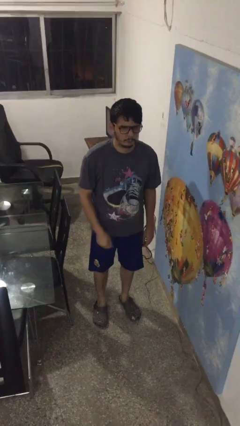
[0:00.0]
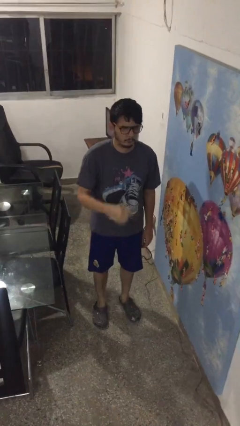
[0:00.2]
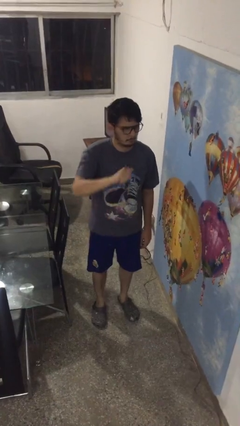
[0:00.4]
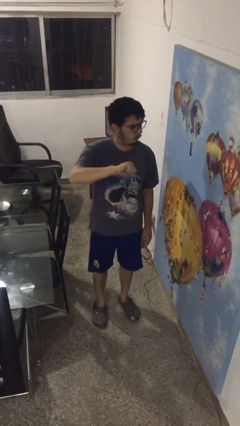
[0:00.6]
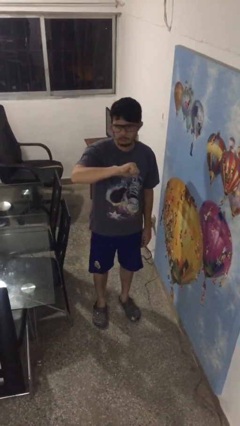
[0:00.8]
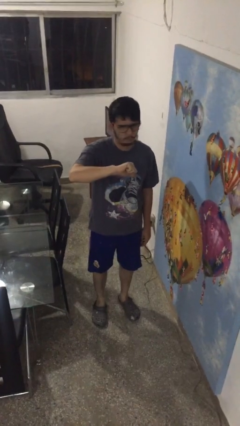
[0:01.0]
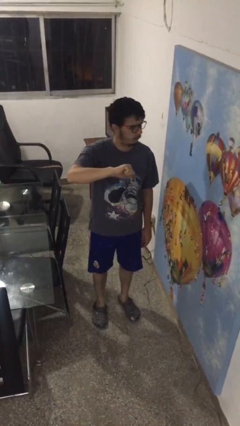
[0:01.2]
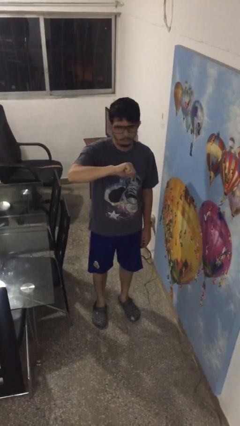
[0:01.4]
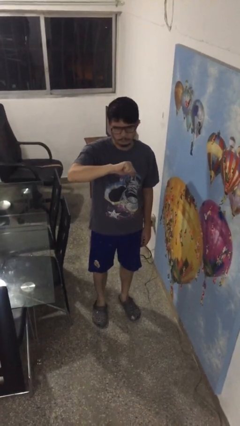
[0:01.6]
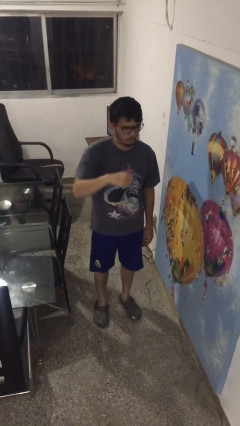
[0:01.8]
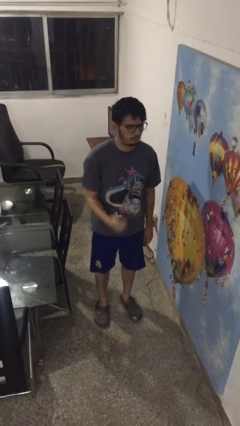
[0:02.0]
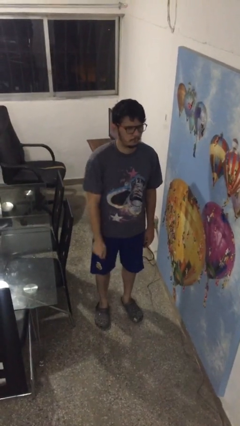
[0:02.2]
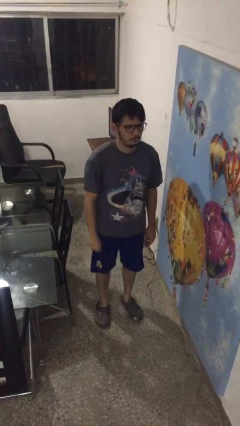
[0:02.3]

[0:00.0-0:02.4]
person gestures thumbs down

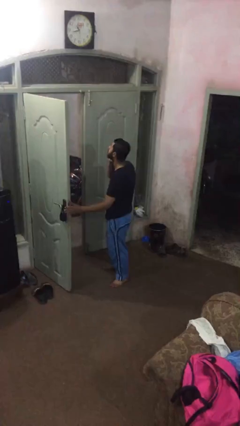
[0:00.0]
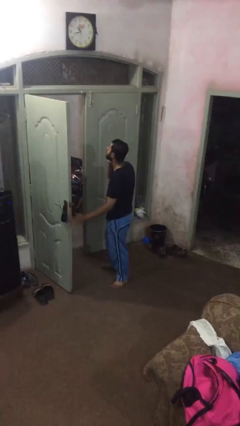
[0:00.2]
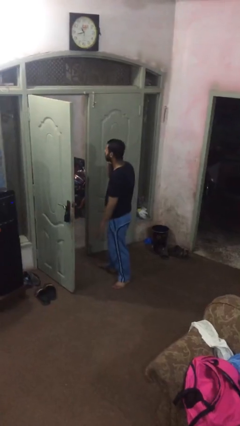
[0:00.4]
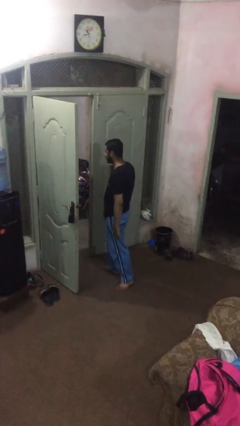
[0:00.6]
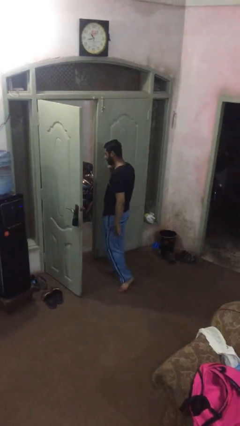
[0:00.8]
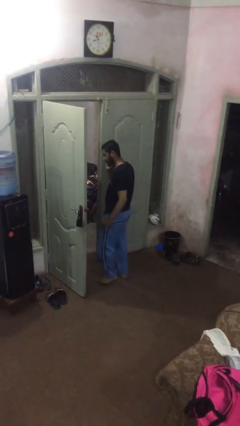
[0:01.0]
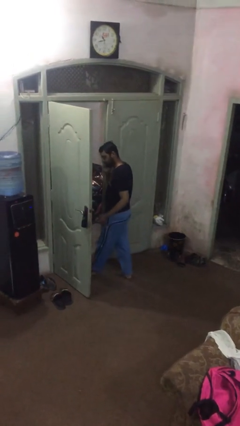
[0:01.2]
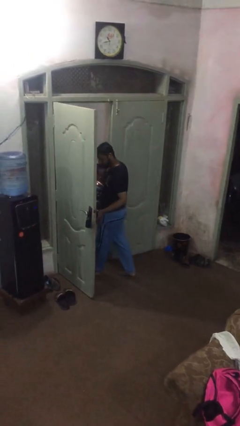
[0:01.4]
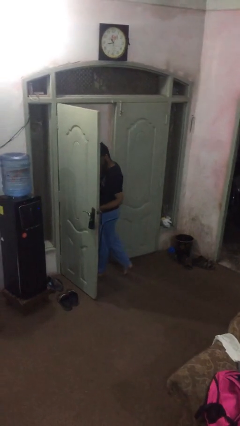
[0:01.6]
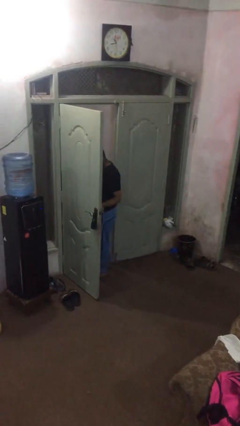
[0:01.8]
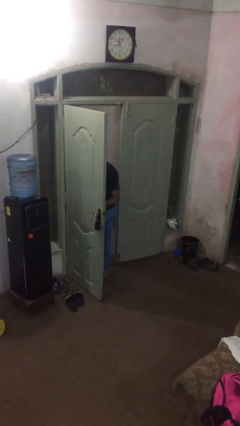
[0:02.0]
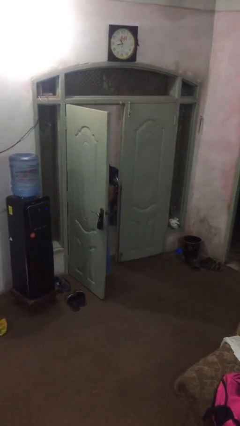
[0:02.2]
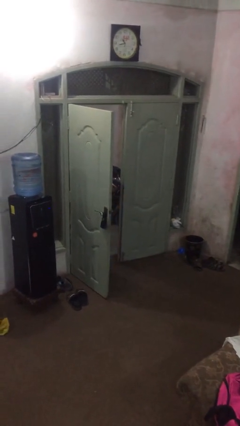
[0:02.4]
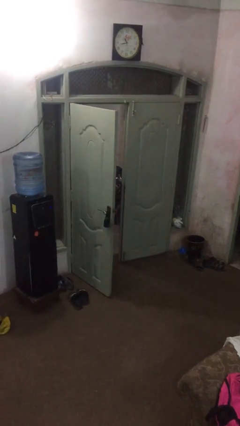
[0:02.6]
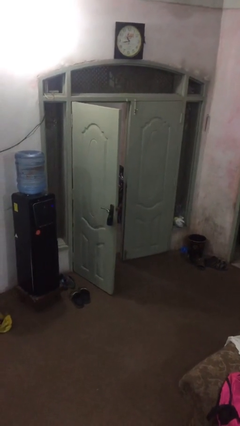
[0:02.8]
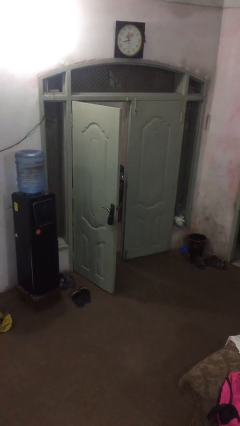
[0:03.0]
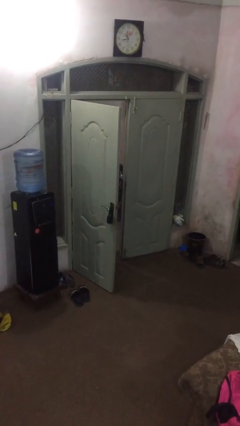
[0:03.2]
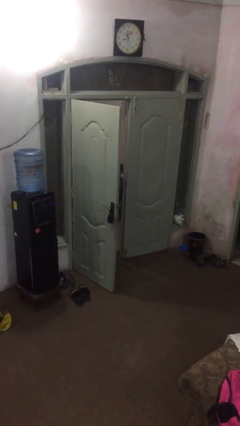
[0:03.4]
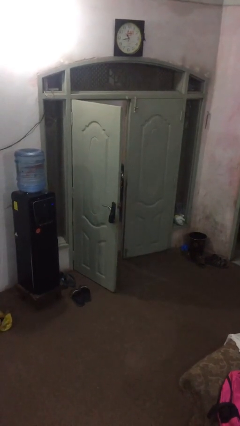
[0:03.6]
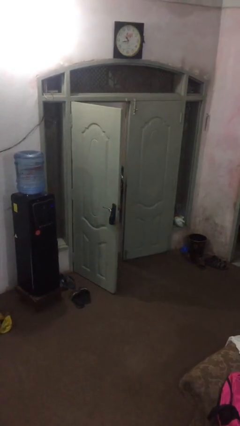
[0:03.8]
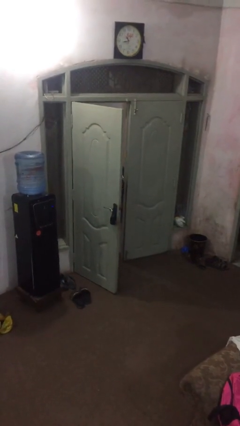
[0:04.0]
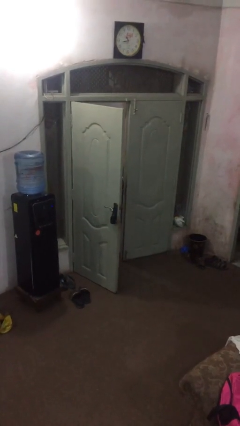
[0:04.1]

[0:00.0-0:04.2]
person exits scene through structure

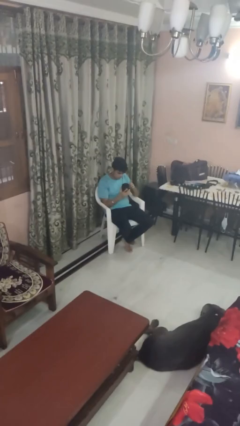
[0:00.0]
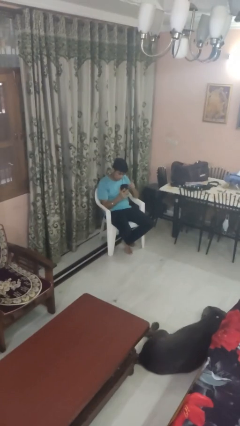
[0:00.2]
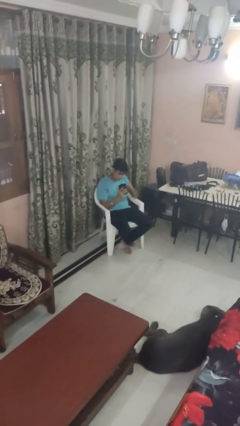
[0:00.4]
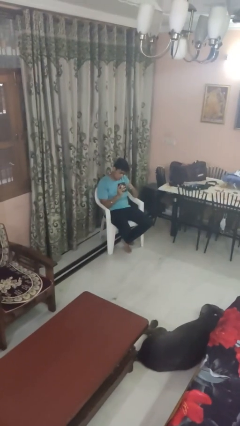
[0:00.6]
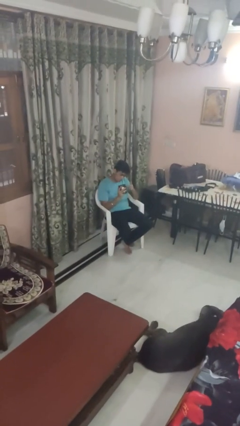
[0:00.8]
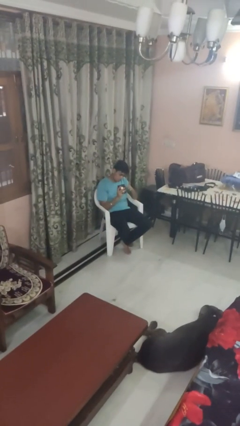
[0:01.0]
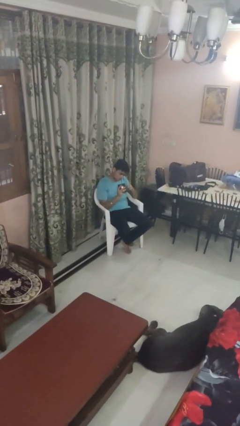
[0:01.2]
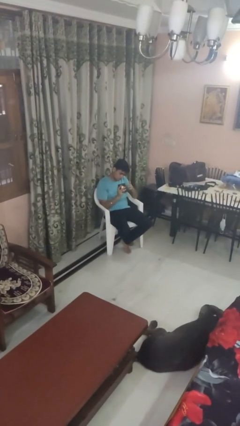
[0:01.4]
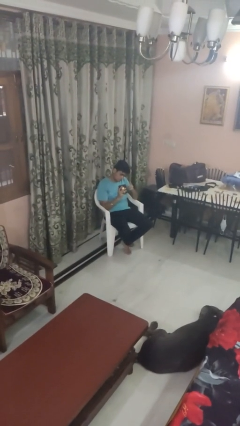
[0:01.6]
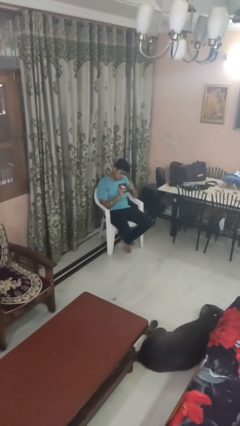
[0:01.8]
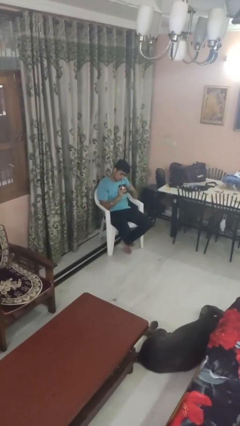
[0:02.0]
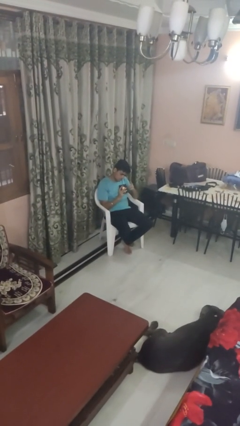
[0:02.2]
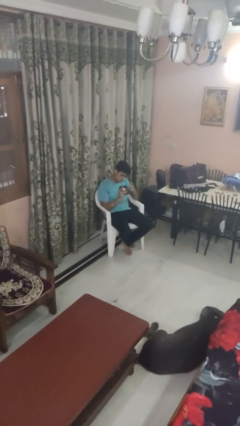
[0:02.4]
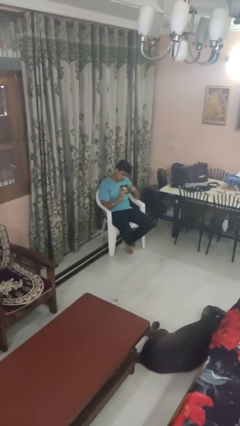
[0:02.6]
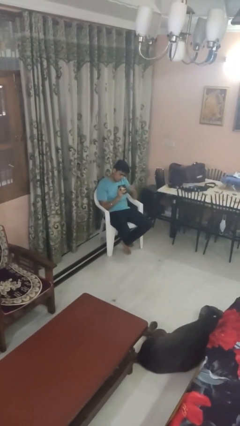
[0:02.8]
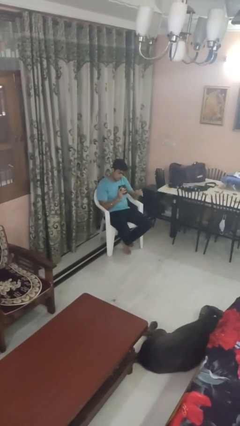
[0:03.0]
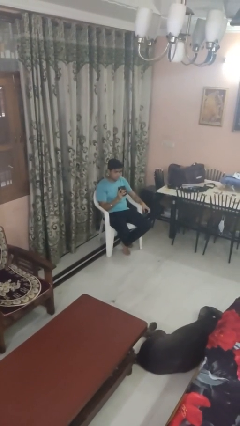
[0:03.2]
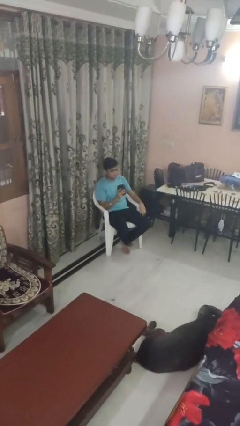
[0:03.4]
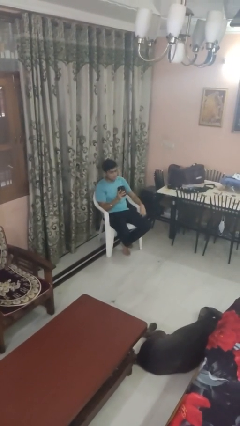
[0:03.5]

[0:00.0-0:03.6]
person taps object with finger

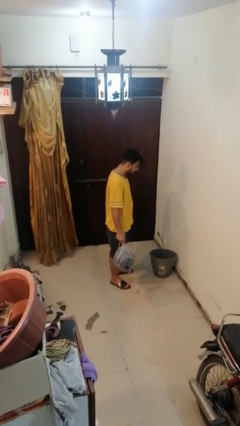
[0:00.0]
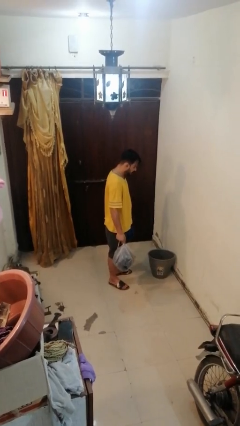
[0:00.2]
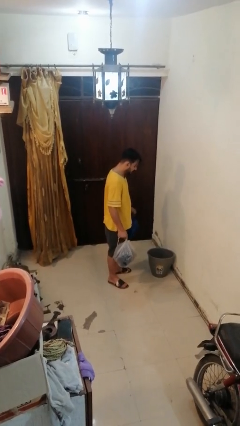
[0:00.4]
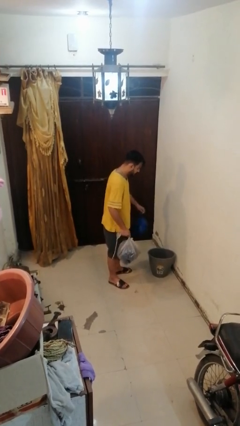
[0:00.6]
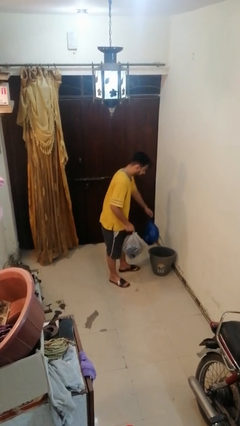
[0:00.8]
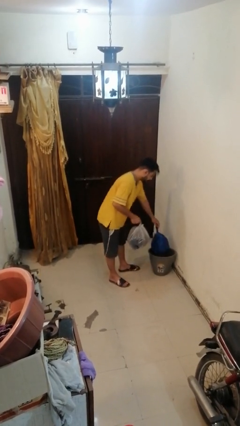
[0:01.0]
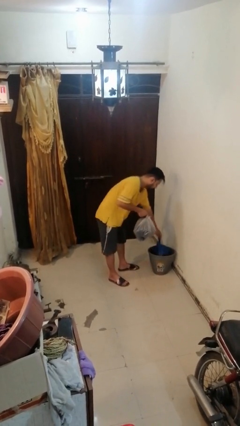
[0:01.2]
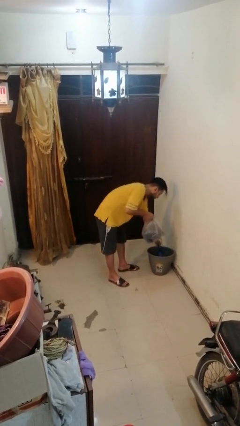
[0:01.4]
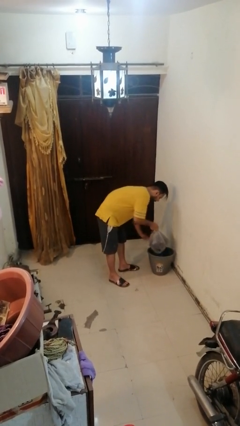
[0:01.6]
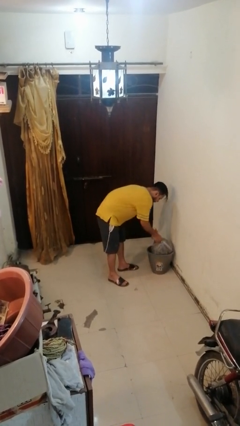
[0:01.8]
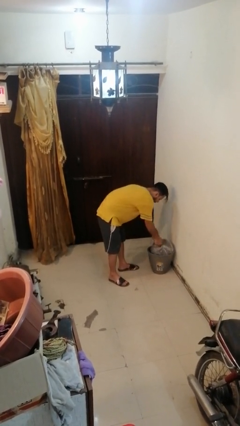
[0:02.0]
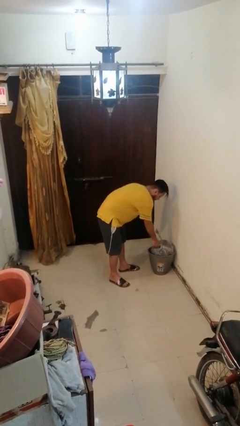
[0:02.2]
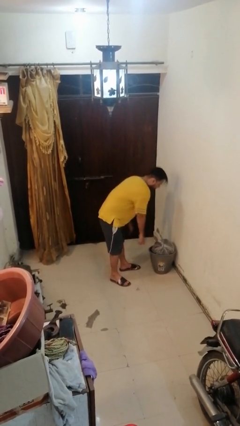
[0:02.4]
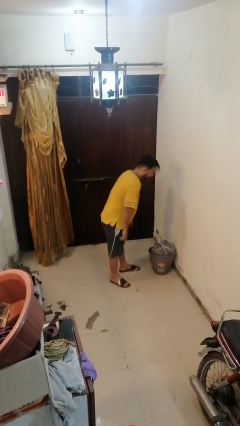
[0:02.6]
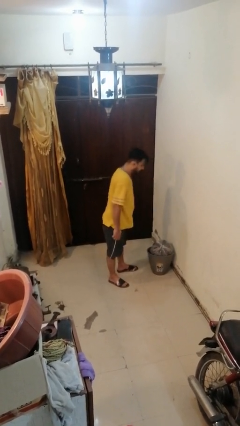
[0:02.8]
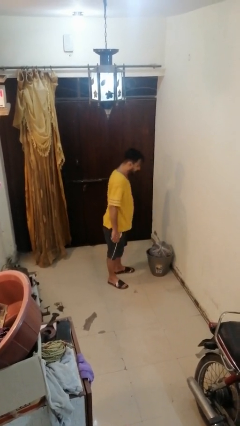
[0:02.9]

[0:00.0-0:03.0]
person discards trash

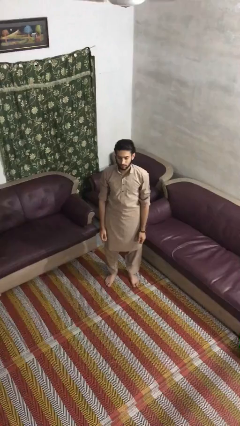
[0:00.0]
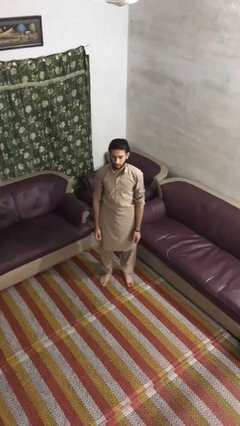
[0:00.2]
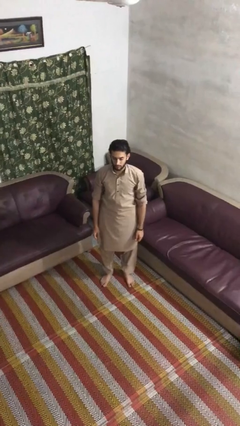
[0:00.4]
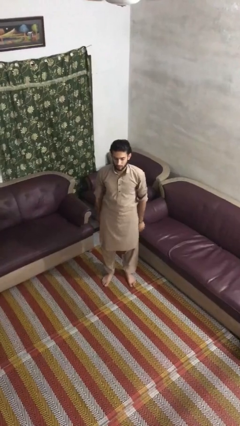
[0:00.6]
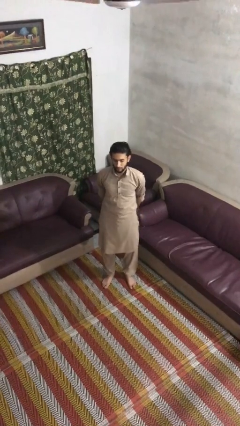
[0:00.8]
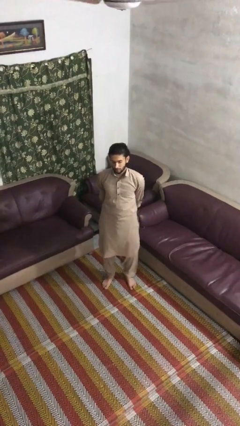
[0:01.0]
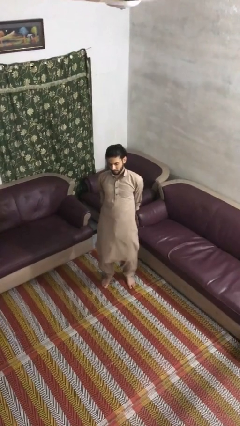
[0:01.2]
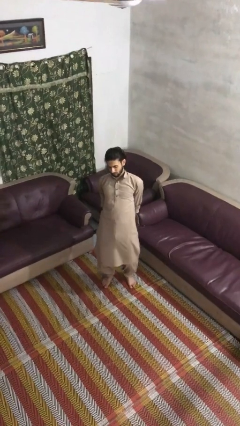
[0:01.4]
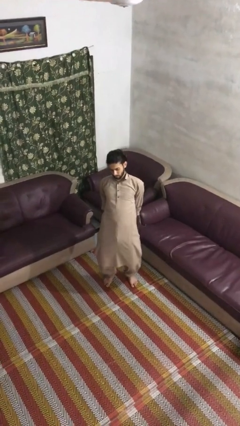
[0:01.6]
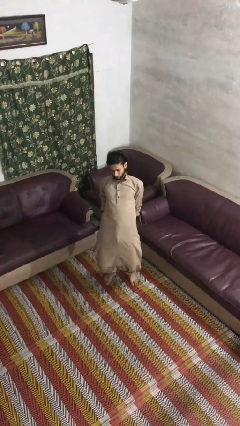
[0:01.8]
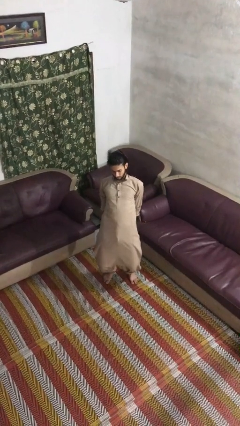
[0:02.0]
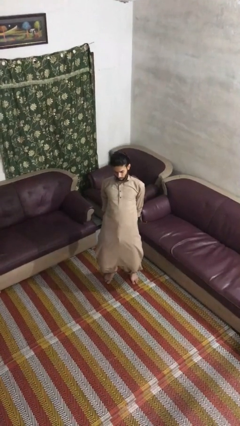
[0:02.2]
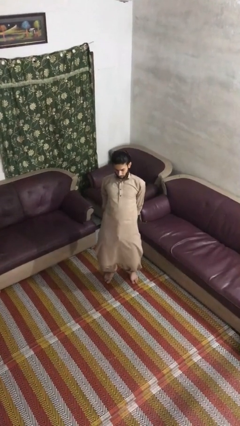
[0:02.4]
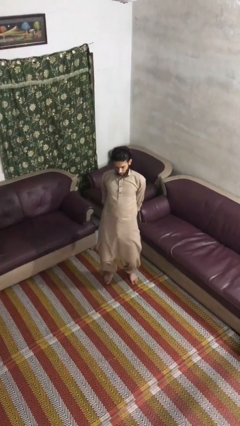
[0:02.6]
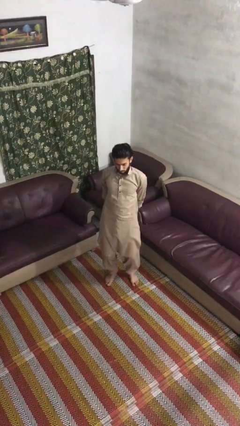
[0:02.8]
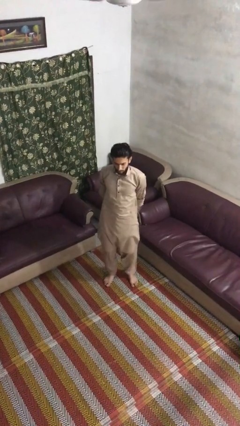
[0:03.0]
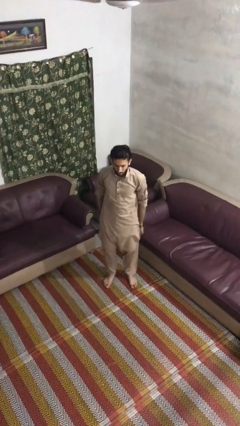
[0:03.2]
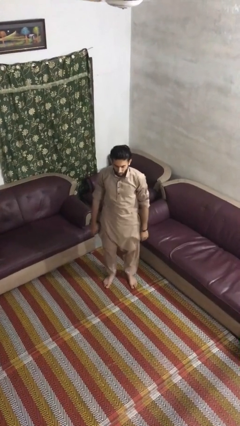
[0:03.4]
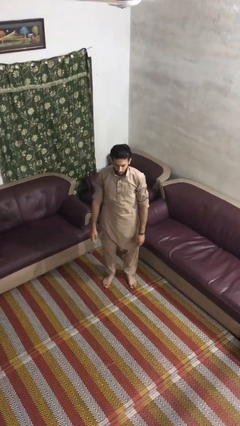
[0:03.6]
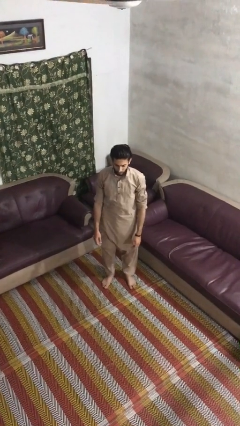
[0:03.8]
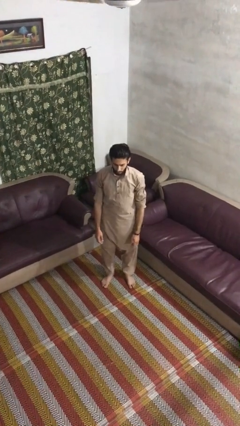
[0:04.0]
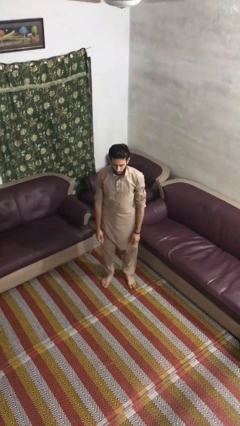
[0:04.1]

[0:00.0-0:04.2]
person stretches back

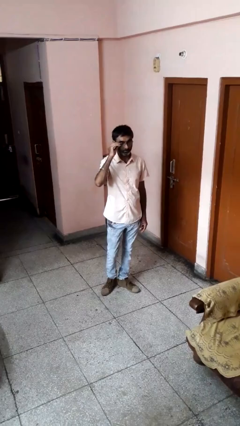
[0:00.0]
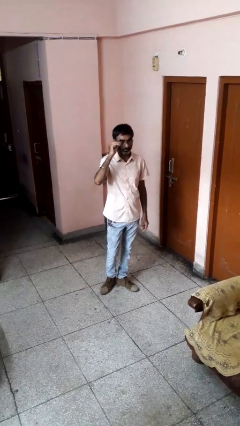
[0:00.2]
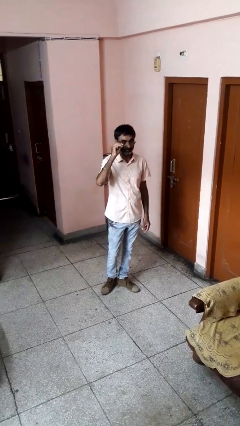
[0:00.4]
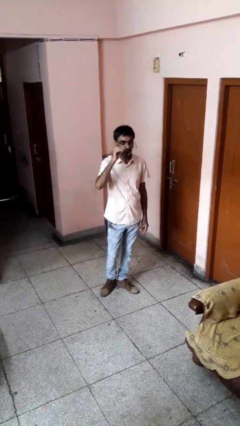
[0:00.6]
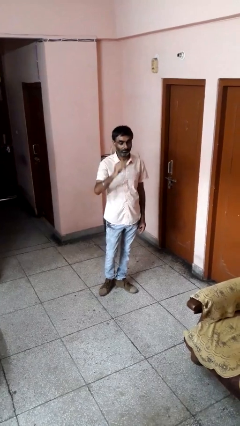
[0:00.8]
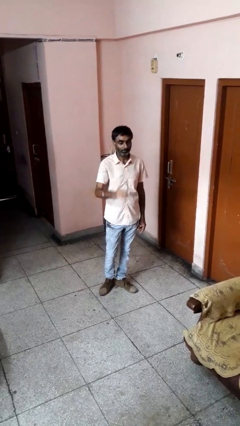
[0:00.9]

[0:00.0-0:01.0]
person takes off glasses
